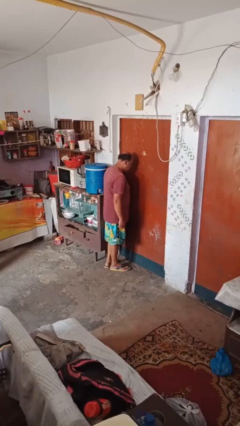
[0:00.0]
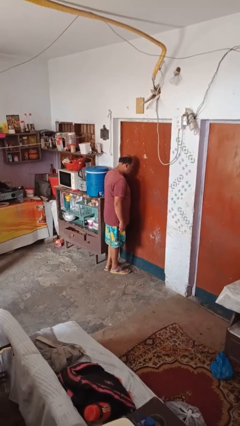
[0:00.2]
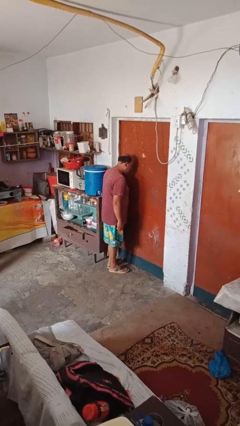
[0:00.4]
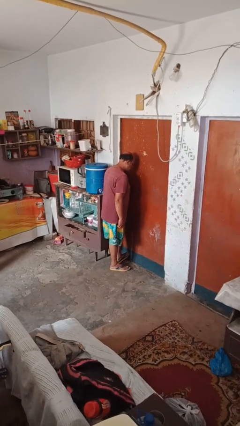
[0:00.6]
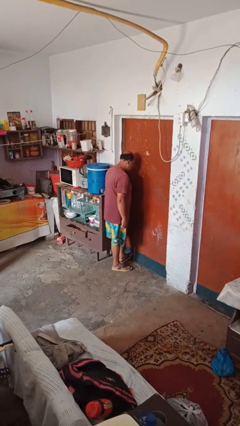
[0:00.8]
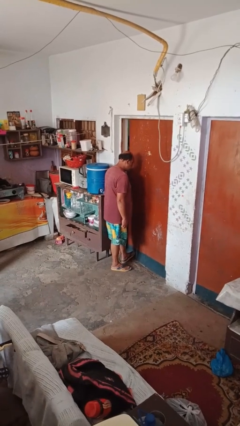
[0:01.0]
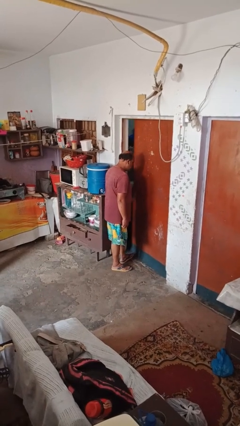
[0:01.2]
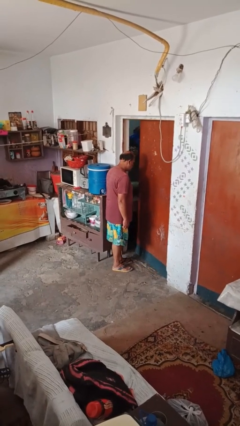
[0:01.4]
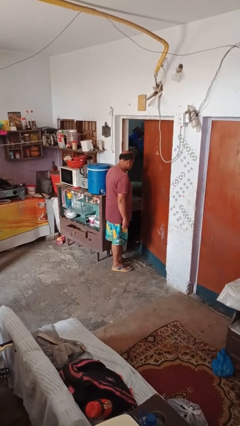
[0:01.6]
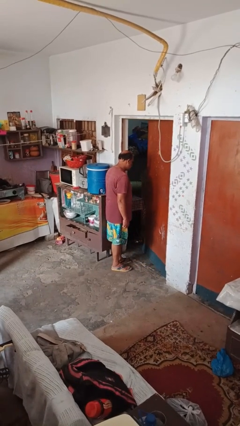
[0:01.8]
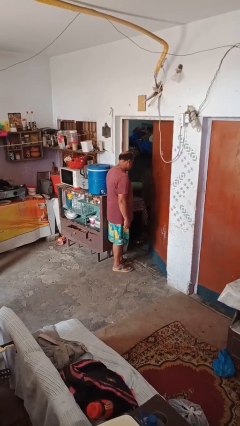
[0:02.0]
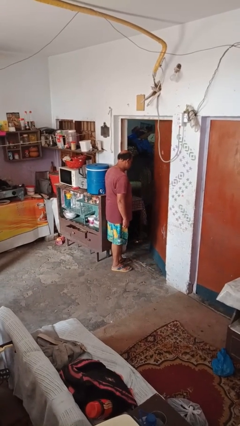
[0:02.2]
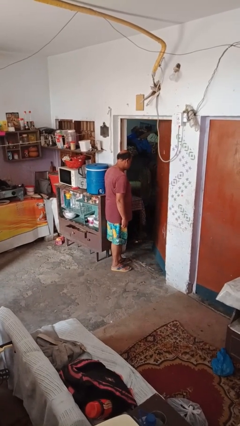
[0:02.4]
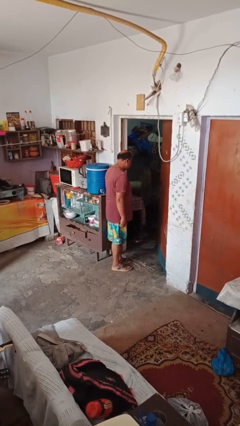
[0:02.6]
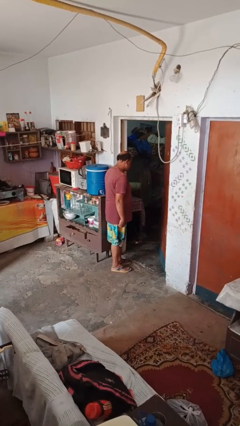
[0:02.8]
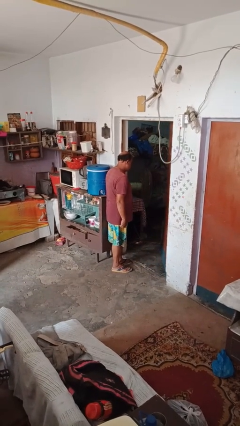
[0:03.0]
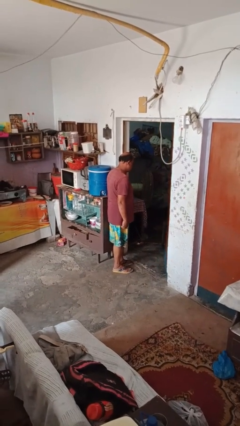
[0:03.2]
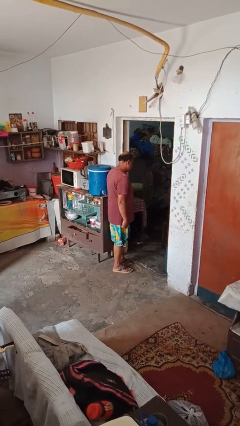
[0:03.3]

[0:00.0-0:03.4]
person opens facility door

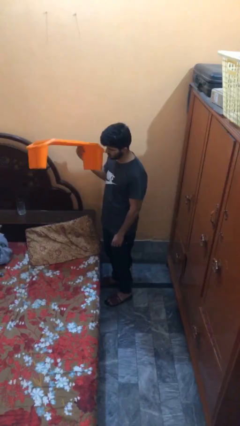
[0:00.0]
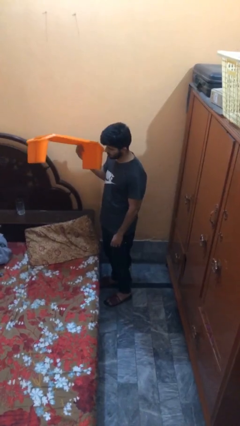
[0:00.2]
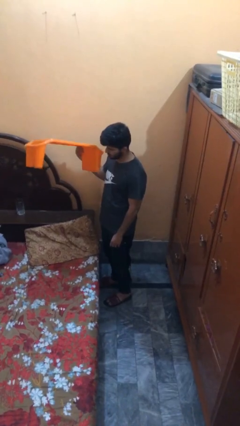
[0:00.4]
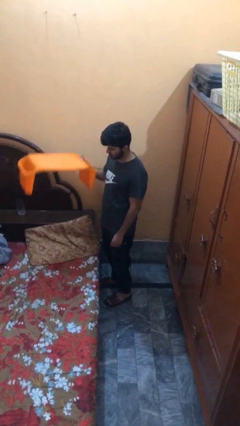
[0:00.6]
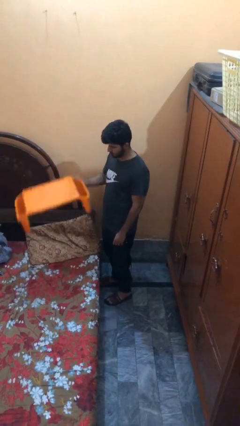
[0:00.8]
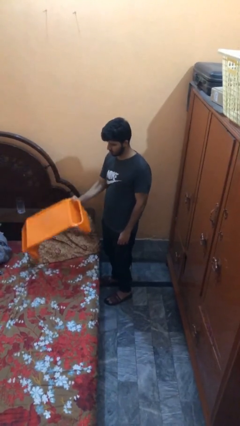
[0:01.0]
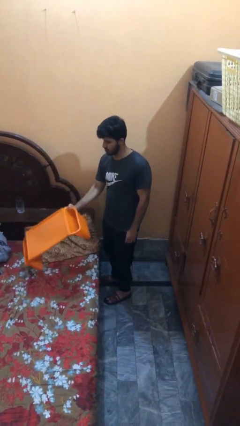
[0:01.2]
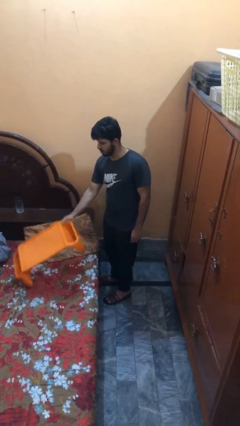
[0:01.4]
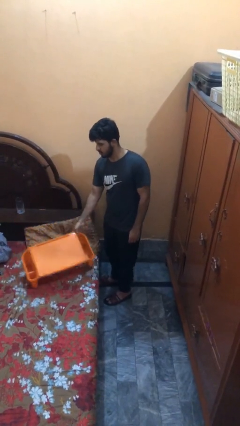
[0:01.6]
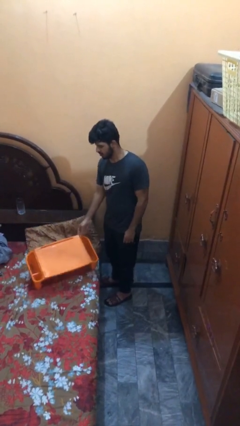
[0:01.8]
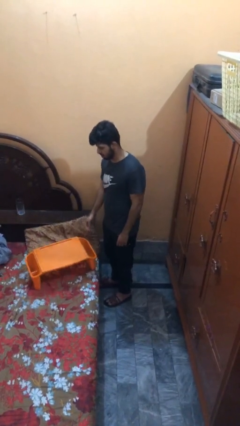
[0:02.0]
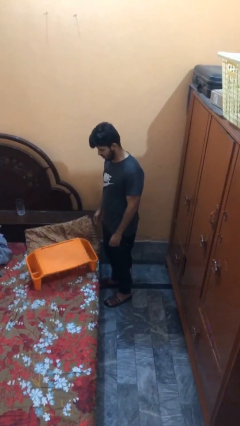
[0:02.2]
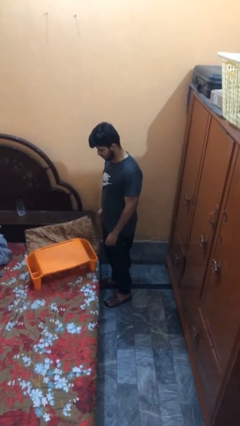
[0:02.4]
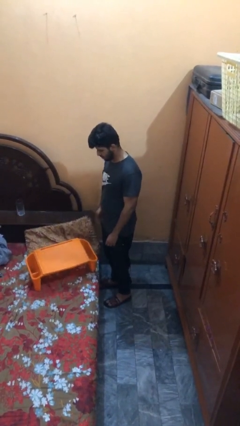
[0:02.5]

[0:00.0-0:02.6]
person puts down object on bed

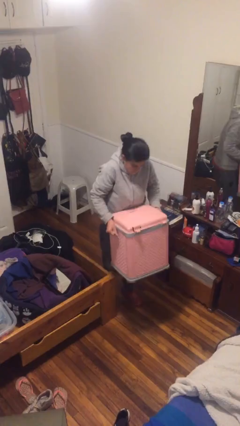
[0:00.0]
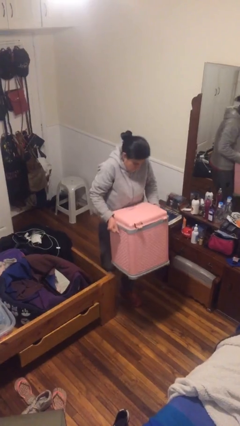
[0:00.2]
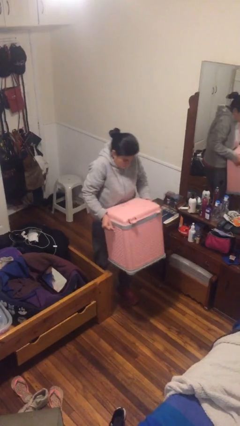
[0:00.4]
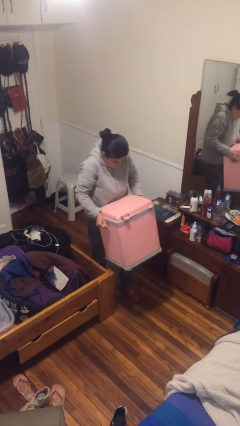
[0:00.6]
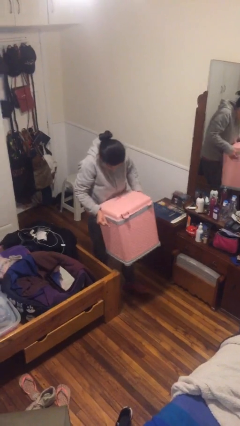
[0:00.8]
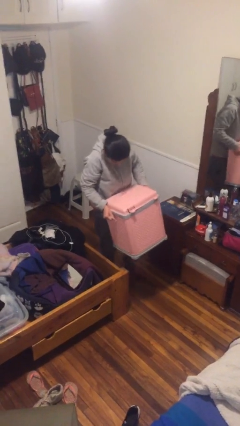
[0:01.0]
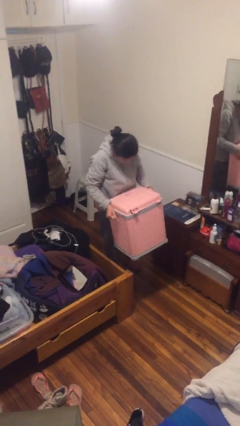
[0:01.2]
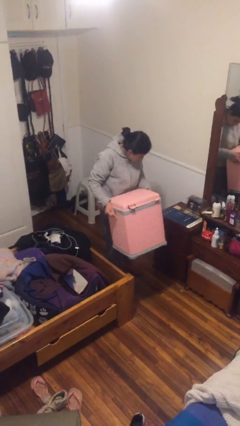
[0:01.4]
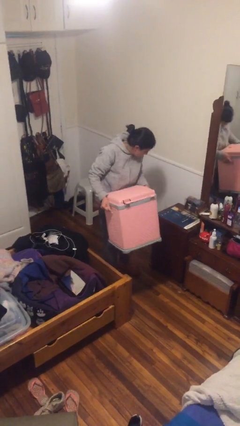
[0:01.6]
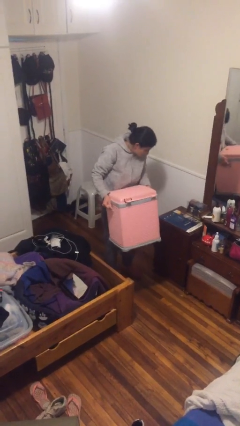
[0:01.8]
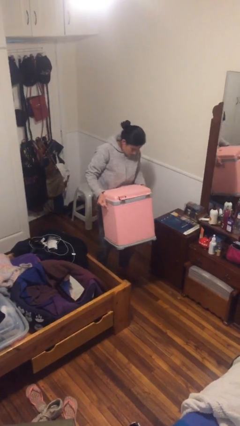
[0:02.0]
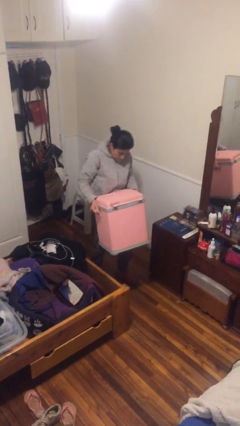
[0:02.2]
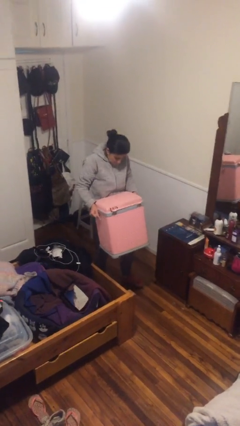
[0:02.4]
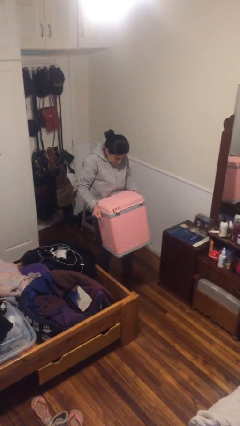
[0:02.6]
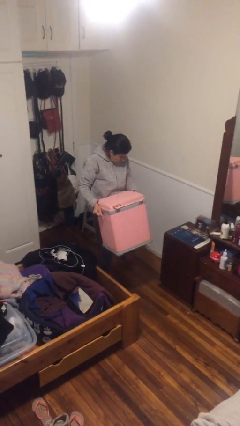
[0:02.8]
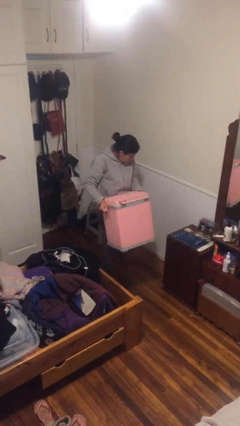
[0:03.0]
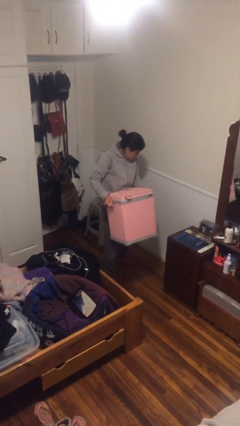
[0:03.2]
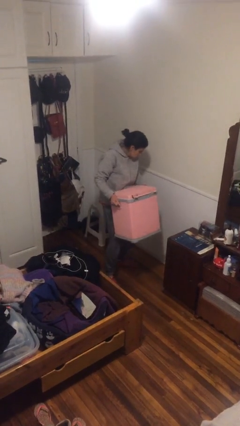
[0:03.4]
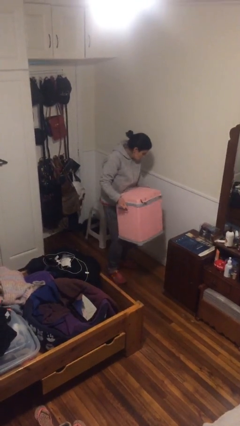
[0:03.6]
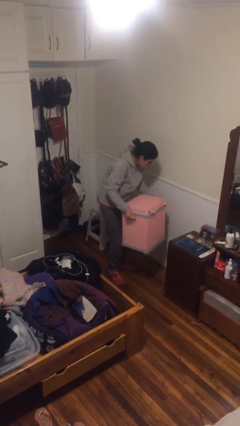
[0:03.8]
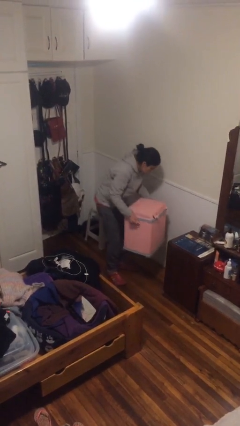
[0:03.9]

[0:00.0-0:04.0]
person carries heavy object

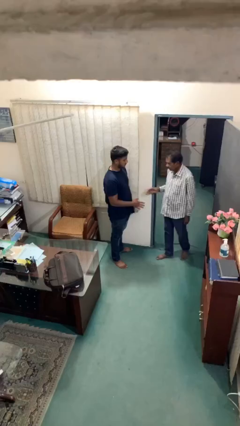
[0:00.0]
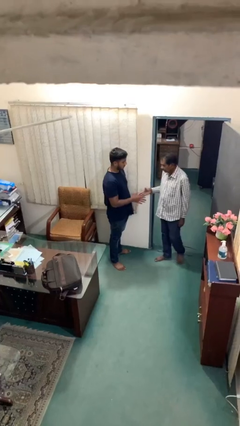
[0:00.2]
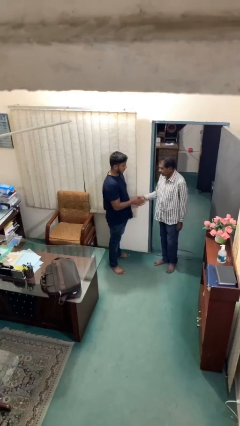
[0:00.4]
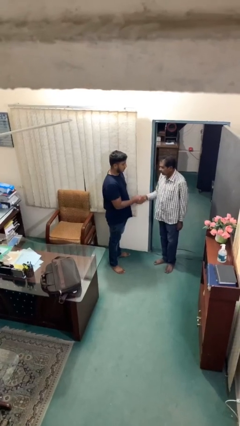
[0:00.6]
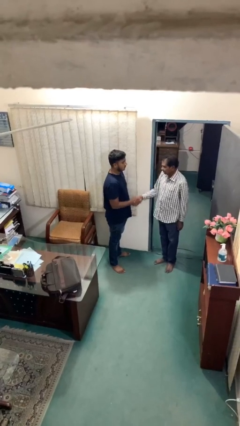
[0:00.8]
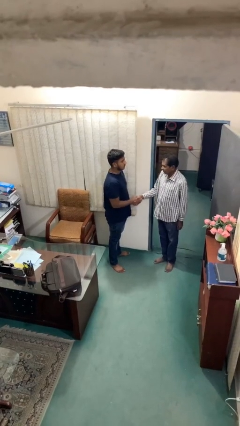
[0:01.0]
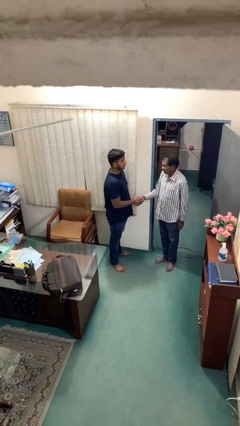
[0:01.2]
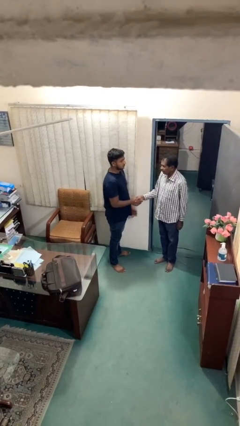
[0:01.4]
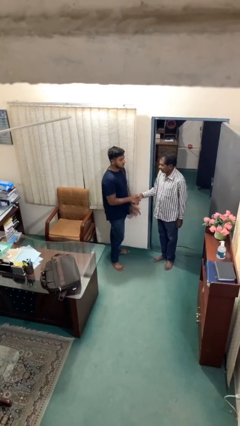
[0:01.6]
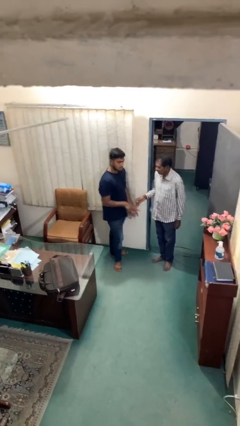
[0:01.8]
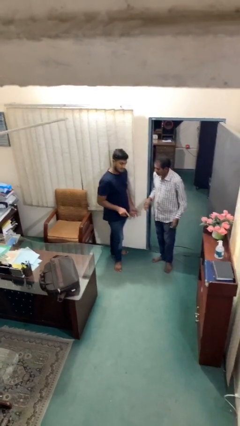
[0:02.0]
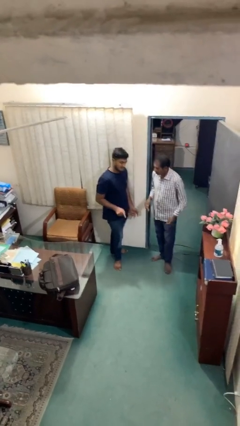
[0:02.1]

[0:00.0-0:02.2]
person shakes hand

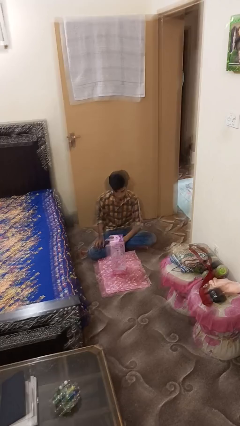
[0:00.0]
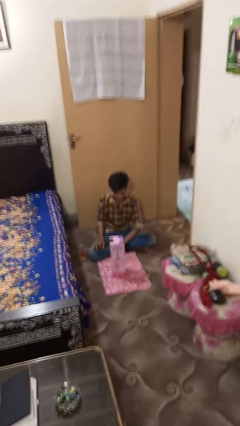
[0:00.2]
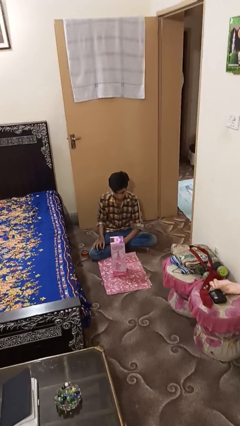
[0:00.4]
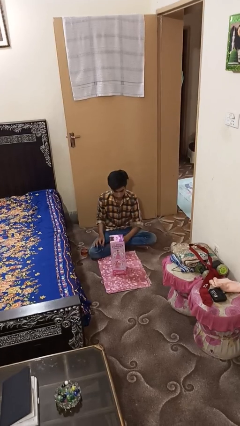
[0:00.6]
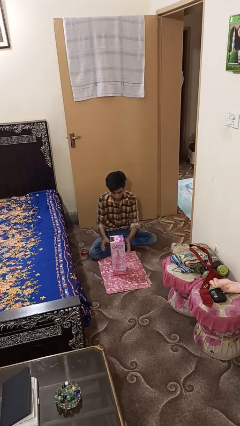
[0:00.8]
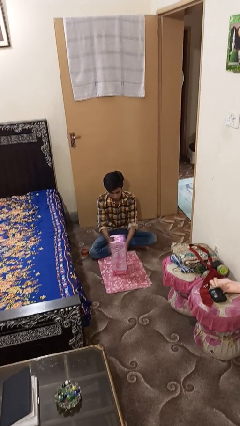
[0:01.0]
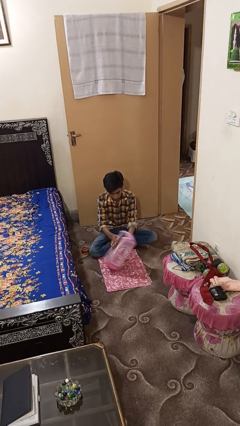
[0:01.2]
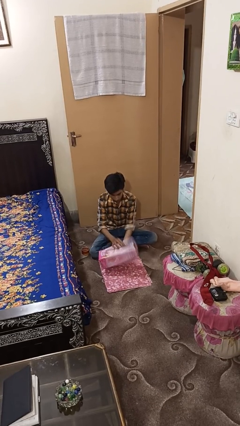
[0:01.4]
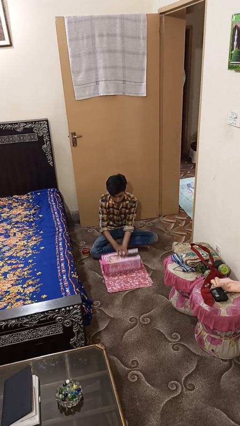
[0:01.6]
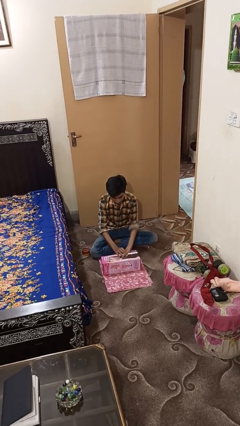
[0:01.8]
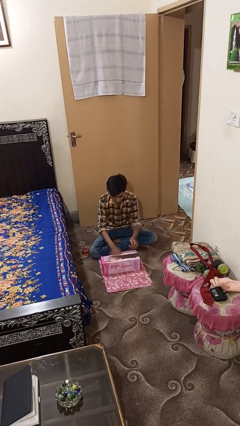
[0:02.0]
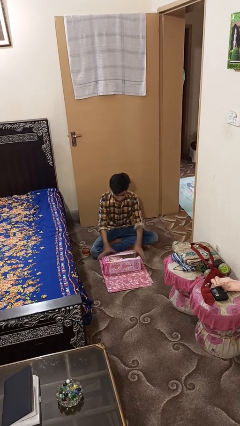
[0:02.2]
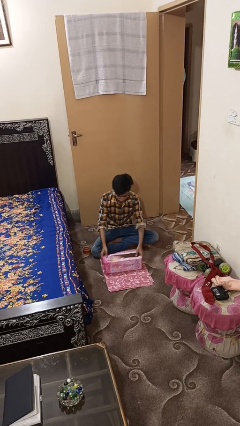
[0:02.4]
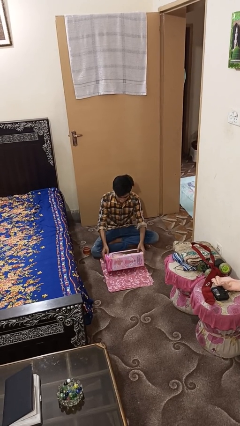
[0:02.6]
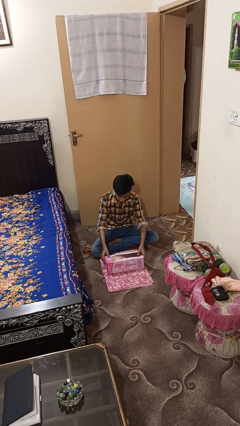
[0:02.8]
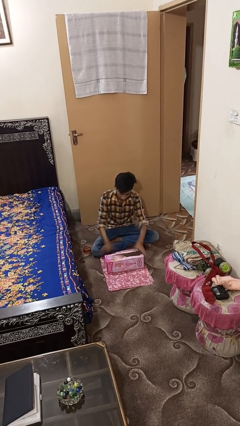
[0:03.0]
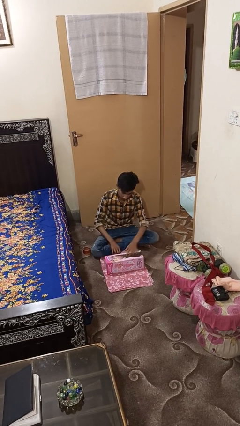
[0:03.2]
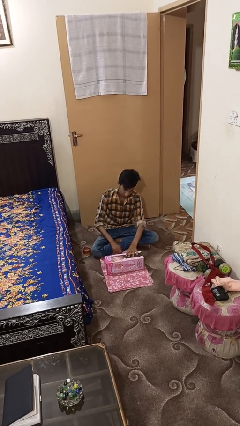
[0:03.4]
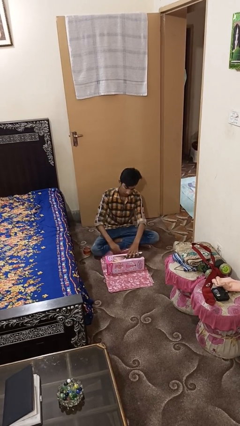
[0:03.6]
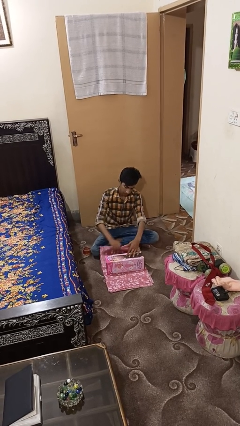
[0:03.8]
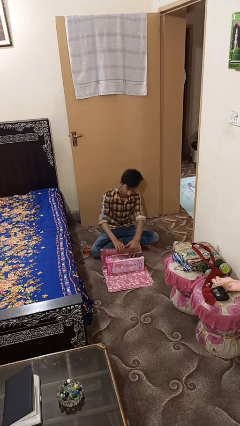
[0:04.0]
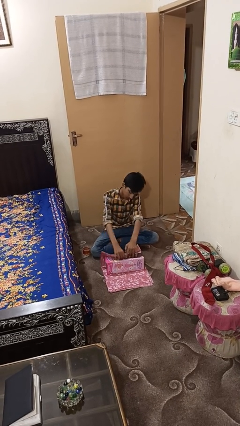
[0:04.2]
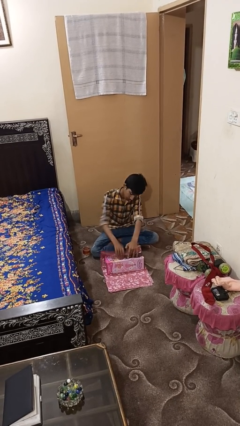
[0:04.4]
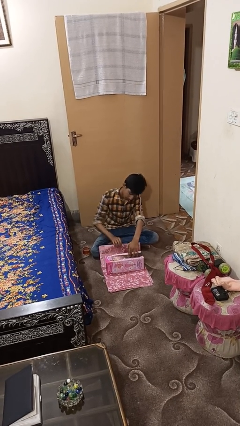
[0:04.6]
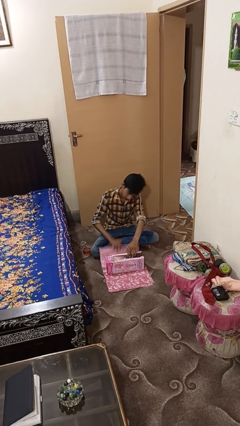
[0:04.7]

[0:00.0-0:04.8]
person wraps box
